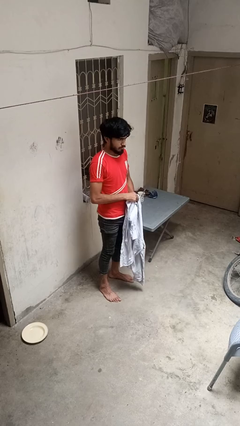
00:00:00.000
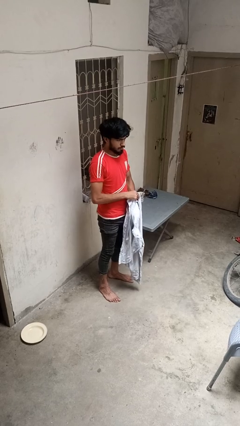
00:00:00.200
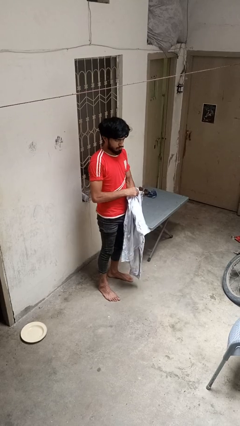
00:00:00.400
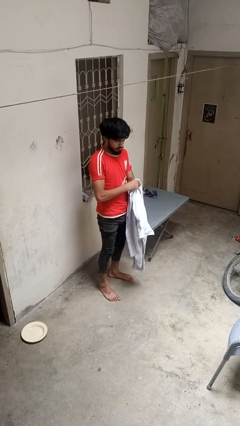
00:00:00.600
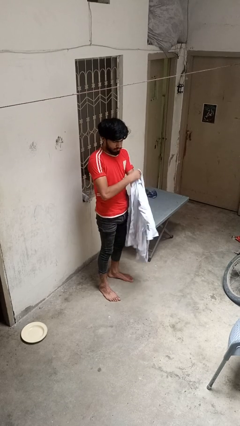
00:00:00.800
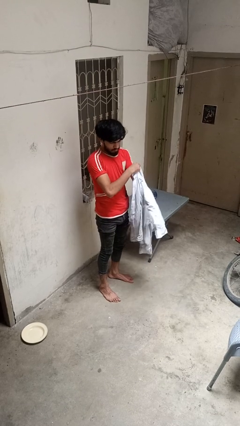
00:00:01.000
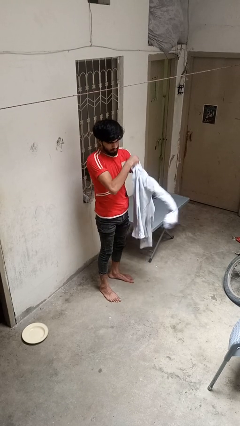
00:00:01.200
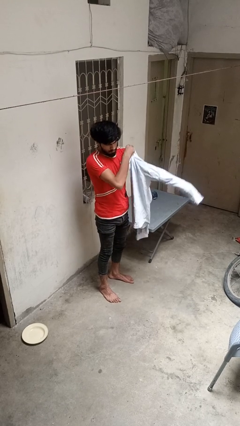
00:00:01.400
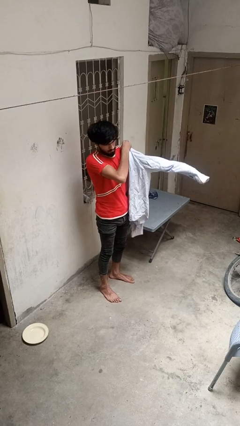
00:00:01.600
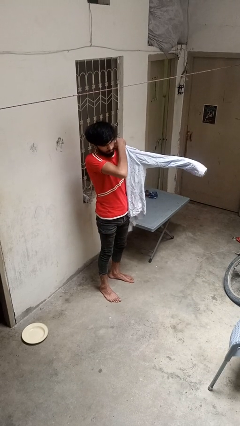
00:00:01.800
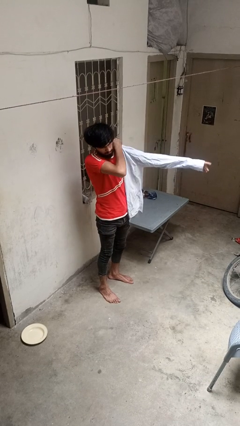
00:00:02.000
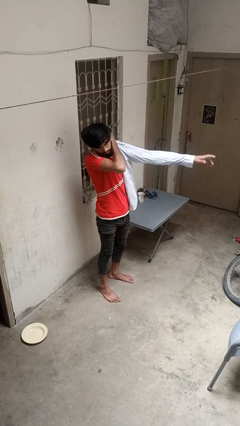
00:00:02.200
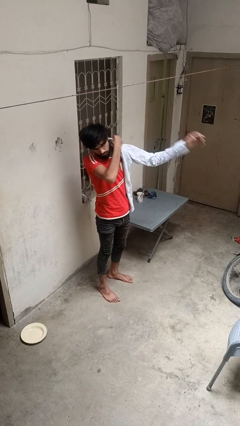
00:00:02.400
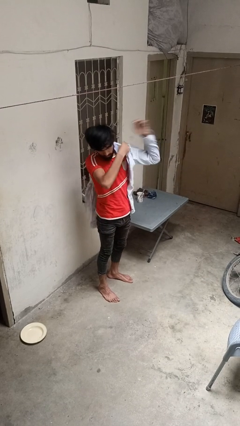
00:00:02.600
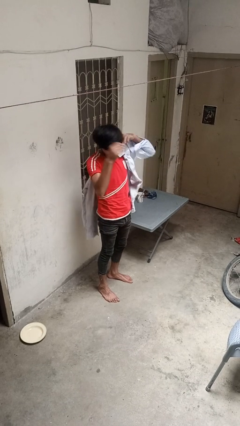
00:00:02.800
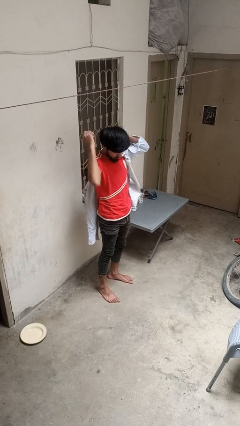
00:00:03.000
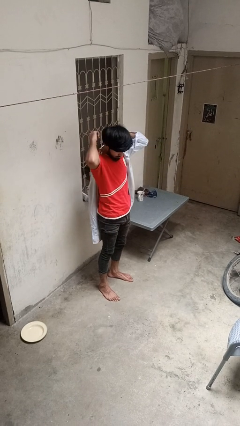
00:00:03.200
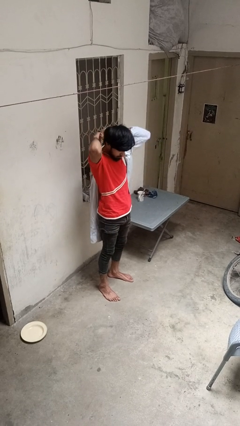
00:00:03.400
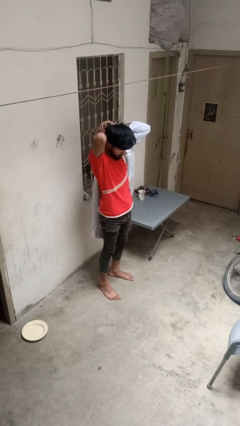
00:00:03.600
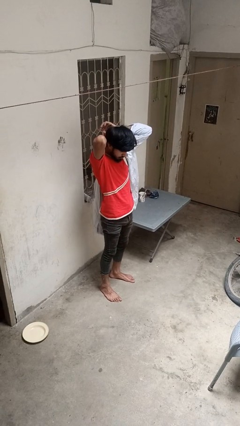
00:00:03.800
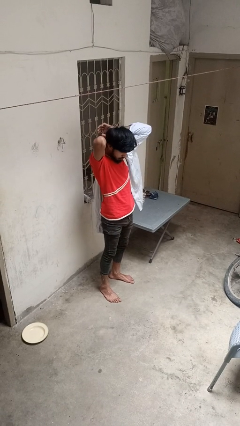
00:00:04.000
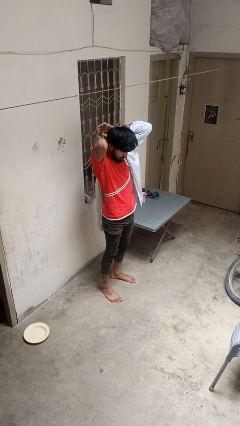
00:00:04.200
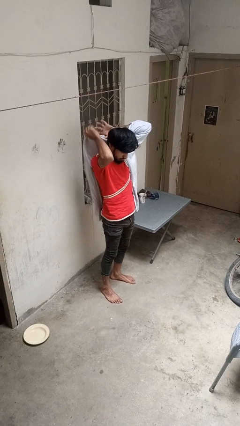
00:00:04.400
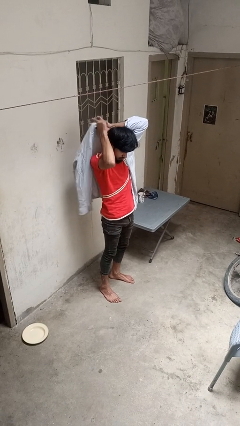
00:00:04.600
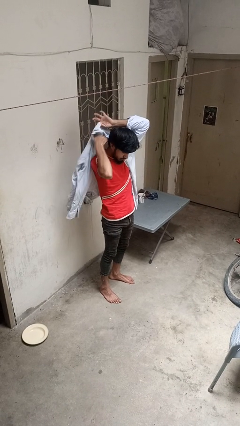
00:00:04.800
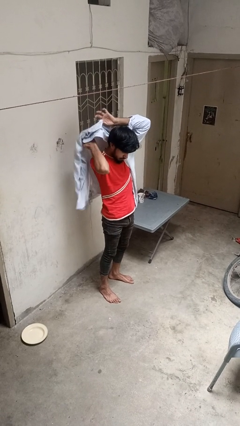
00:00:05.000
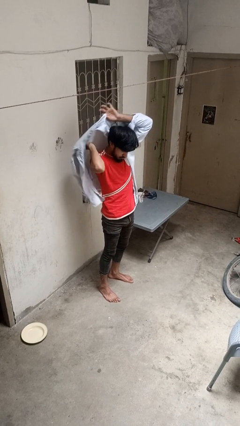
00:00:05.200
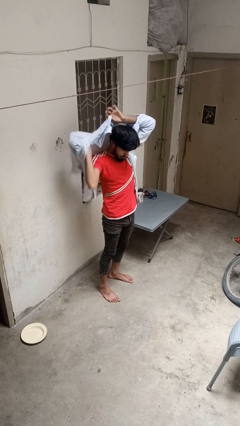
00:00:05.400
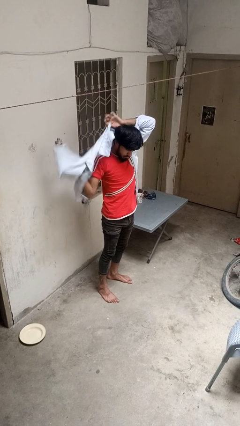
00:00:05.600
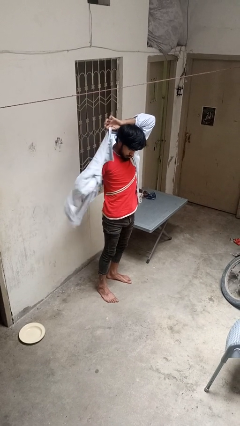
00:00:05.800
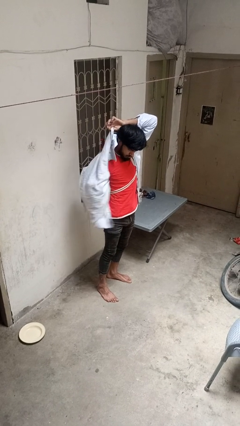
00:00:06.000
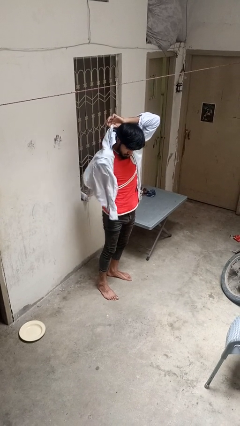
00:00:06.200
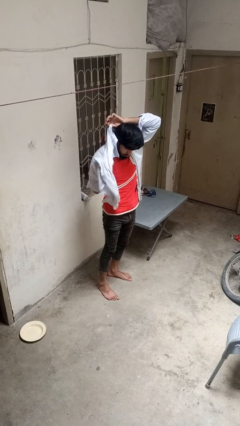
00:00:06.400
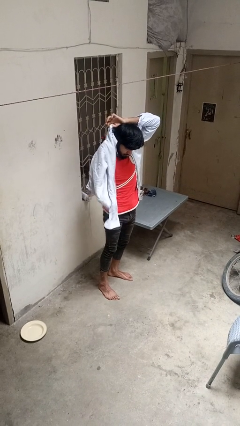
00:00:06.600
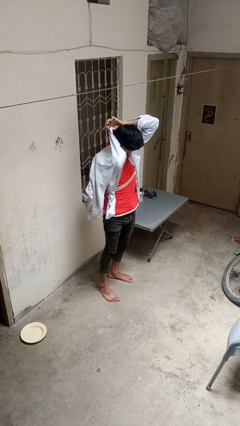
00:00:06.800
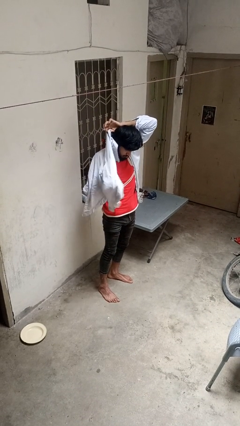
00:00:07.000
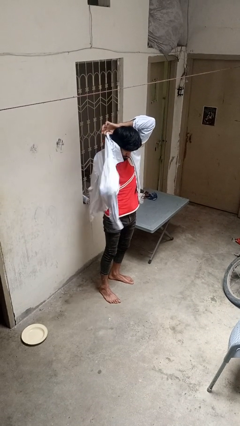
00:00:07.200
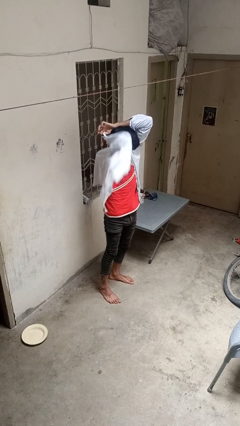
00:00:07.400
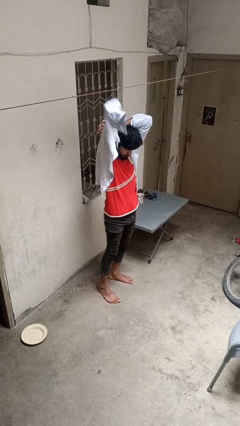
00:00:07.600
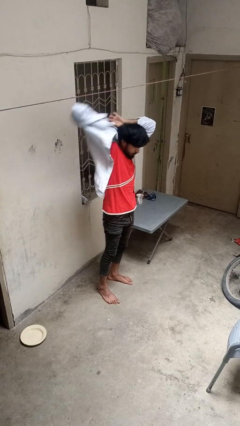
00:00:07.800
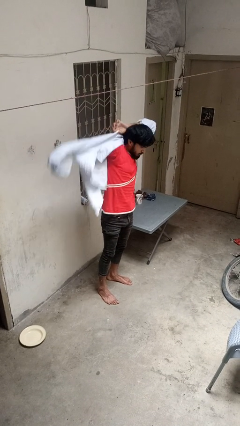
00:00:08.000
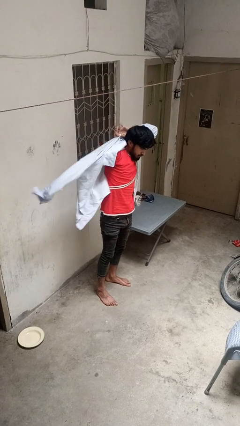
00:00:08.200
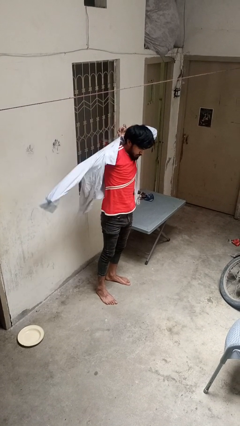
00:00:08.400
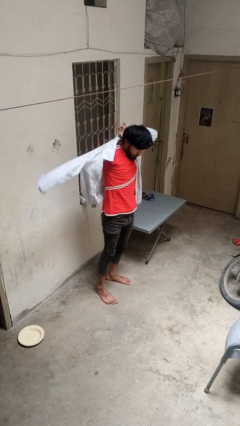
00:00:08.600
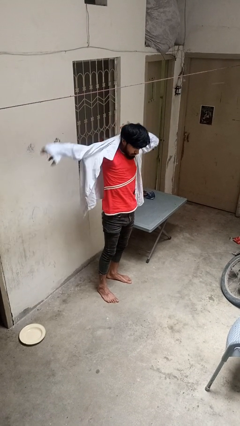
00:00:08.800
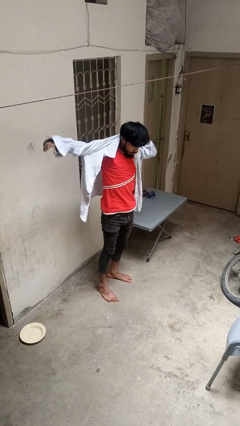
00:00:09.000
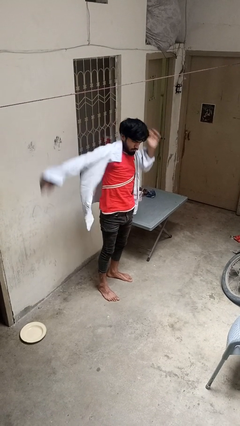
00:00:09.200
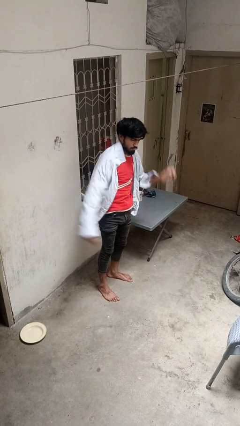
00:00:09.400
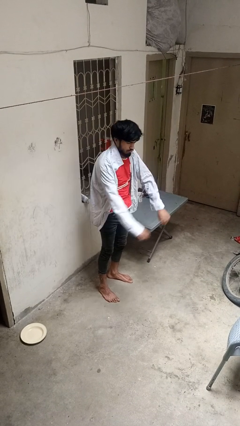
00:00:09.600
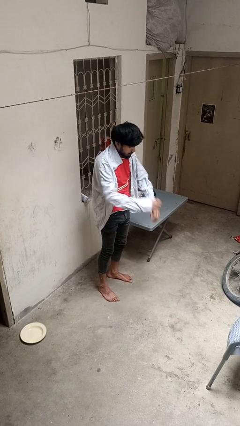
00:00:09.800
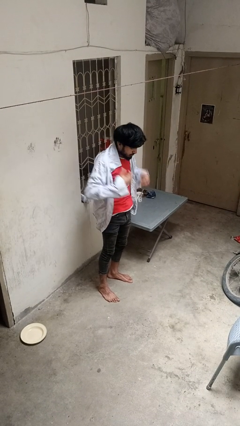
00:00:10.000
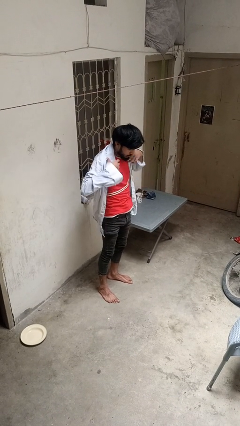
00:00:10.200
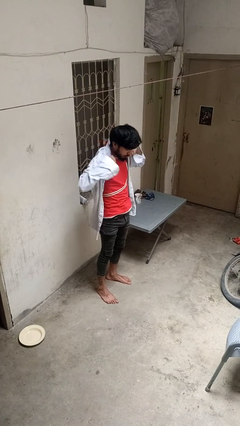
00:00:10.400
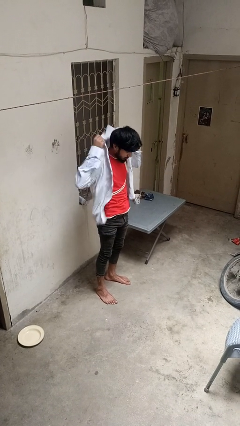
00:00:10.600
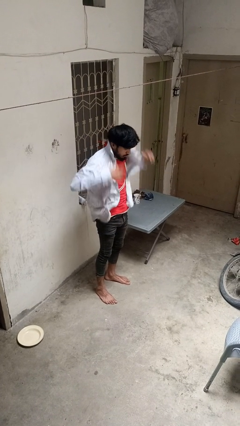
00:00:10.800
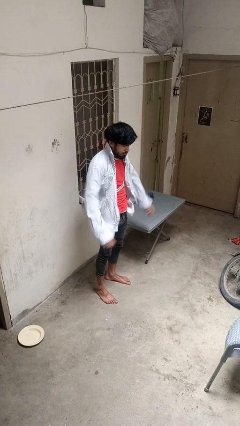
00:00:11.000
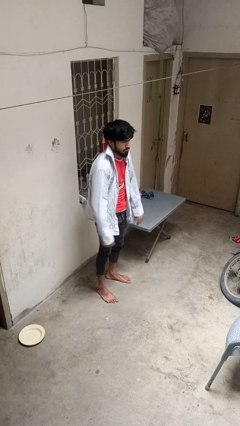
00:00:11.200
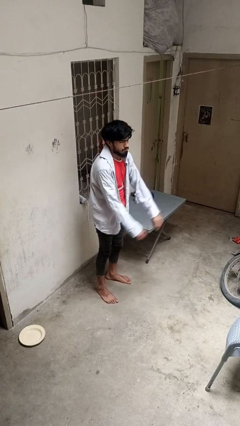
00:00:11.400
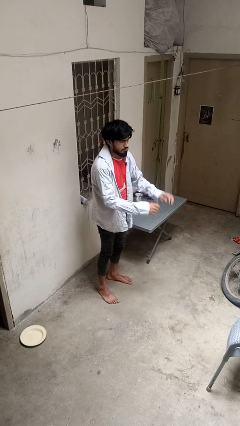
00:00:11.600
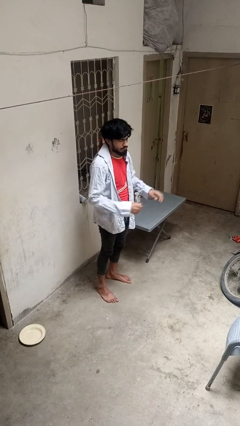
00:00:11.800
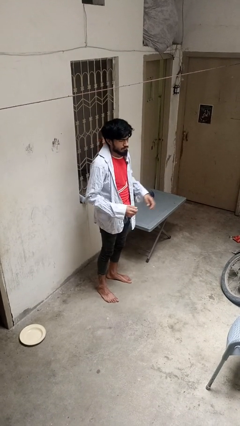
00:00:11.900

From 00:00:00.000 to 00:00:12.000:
person puts on shirt

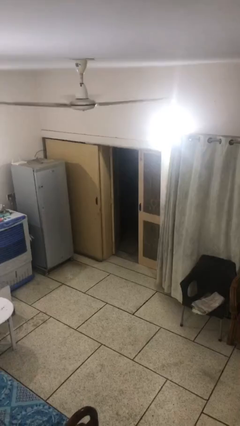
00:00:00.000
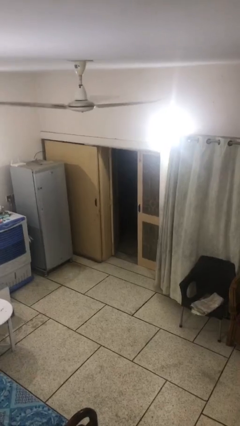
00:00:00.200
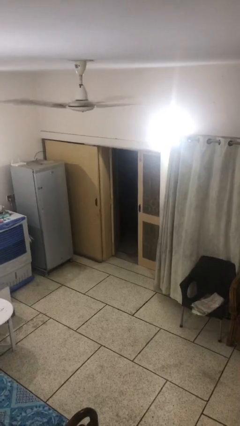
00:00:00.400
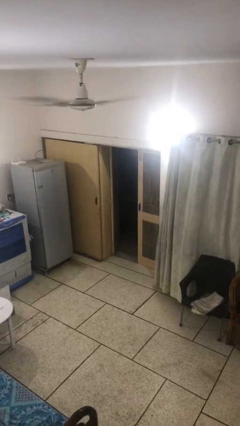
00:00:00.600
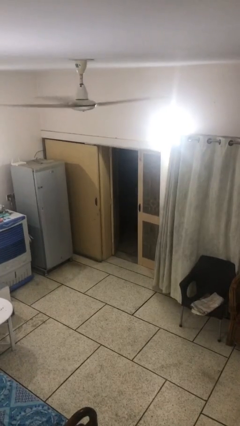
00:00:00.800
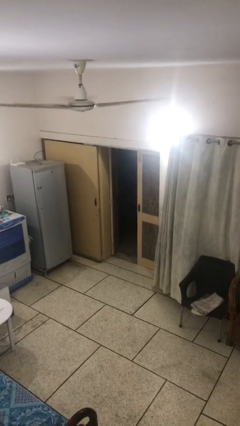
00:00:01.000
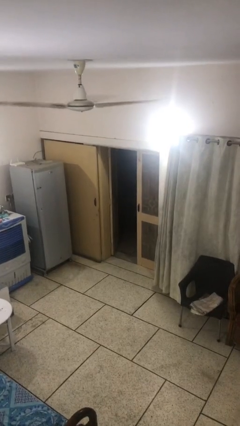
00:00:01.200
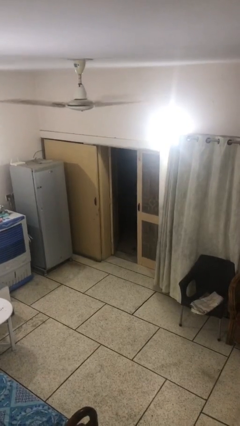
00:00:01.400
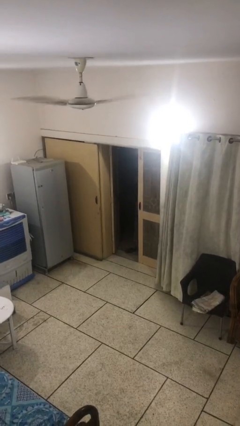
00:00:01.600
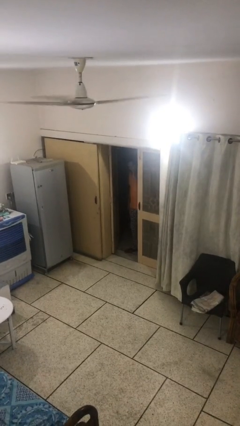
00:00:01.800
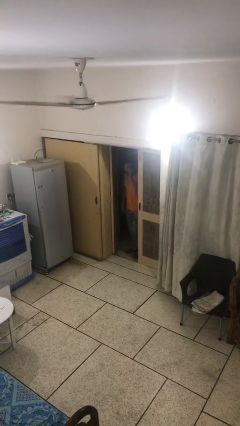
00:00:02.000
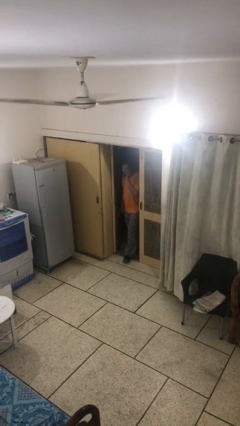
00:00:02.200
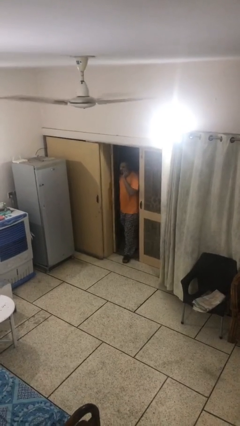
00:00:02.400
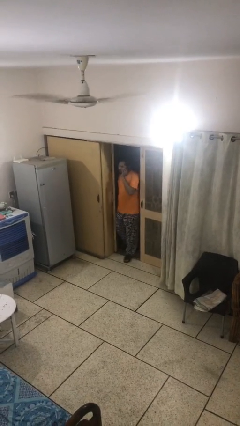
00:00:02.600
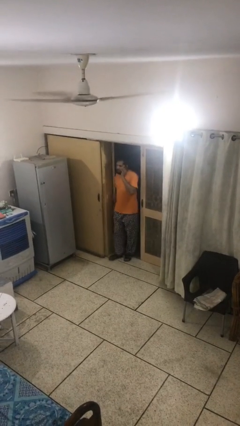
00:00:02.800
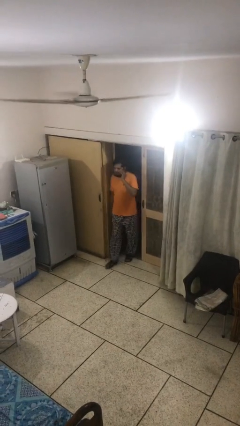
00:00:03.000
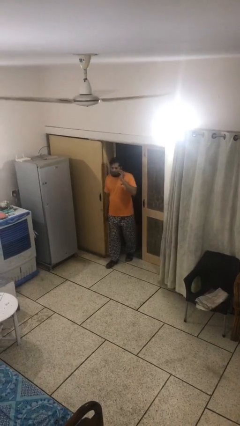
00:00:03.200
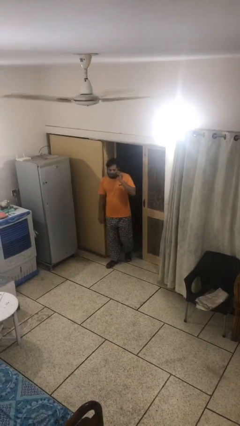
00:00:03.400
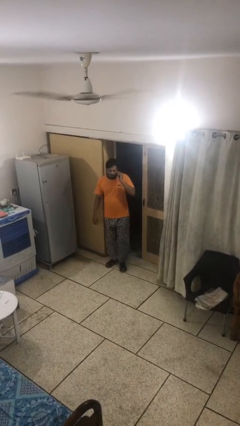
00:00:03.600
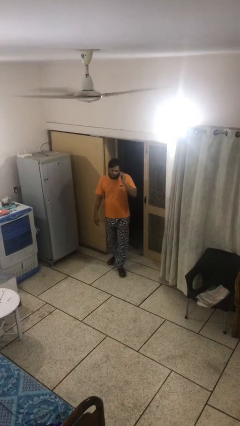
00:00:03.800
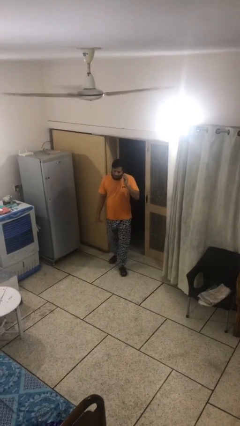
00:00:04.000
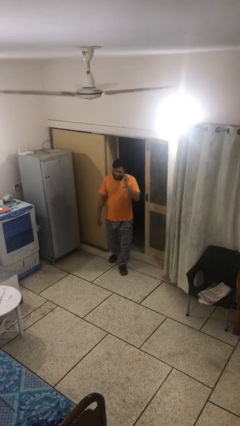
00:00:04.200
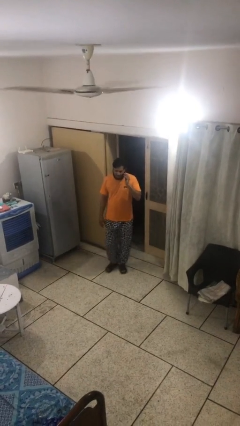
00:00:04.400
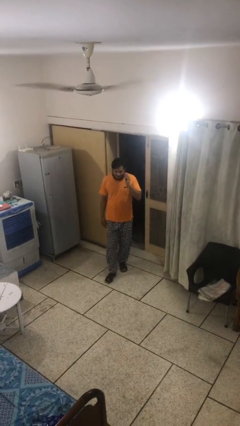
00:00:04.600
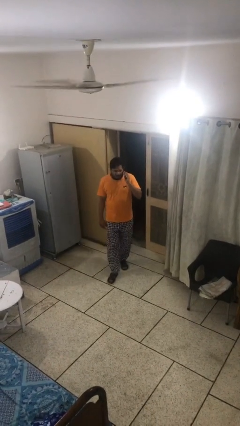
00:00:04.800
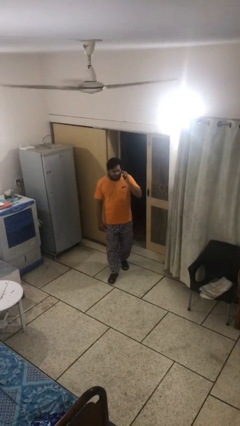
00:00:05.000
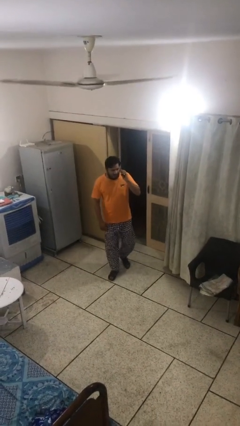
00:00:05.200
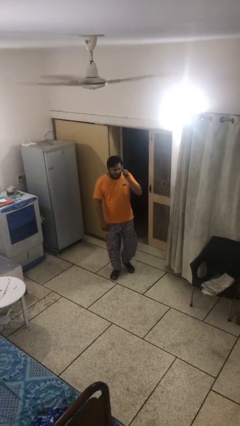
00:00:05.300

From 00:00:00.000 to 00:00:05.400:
person enters scene through structure

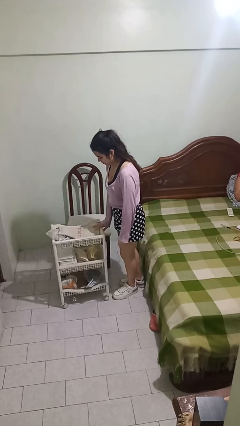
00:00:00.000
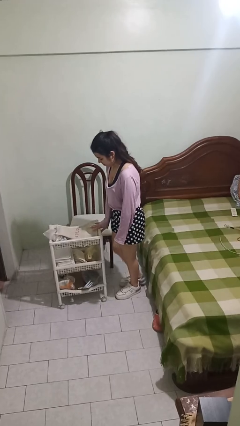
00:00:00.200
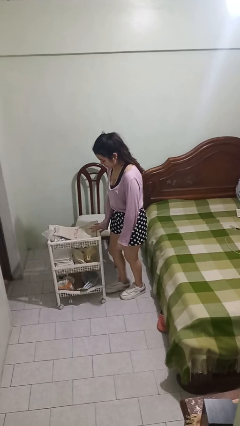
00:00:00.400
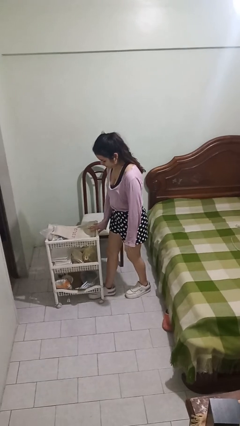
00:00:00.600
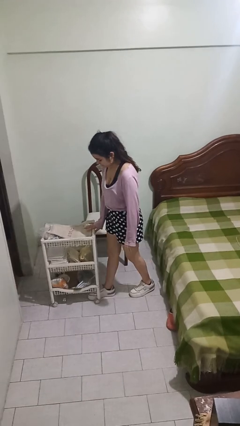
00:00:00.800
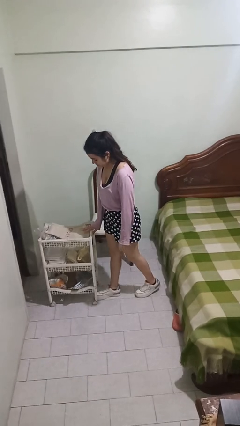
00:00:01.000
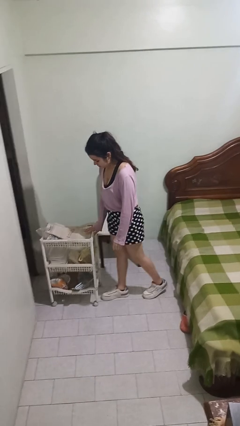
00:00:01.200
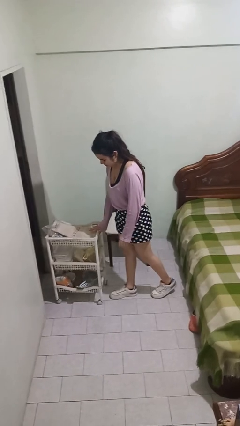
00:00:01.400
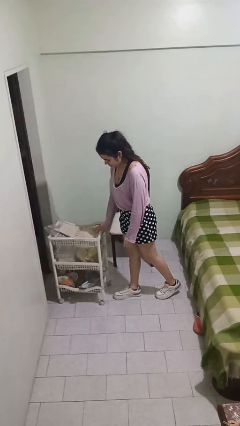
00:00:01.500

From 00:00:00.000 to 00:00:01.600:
person pushes wheeled cart
